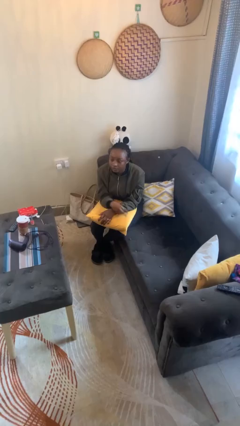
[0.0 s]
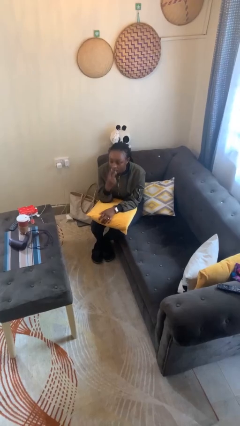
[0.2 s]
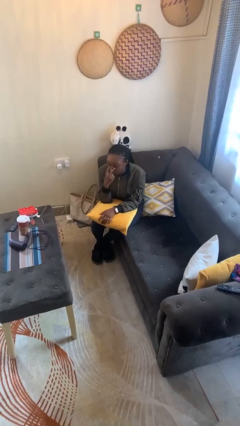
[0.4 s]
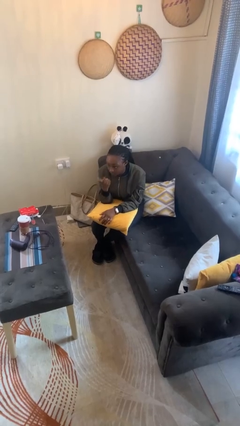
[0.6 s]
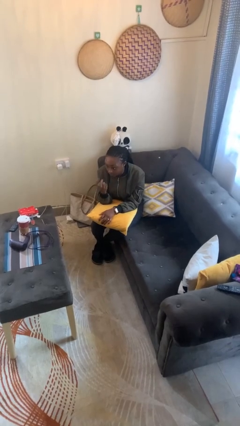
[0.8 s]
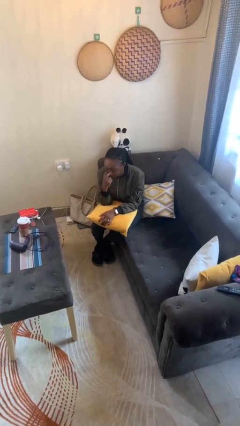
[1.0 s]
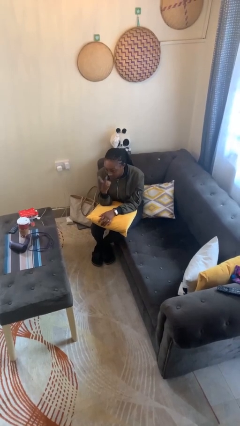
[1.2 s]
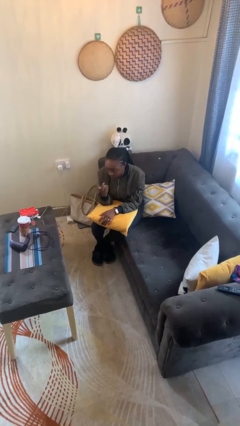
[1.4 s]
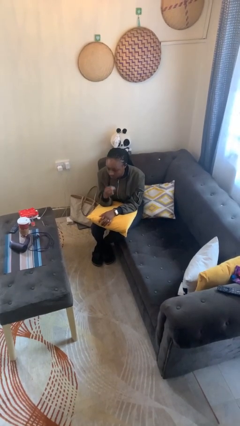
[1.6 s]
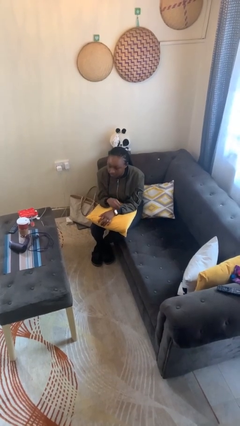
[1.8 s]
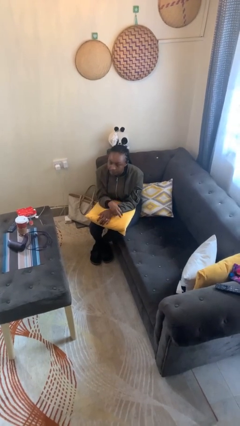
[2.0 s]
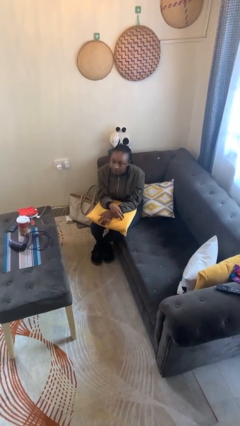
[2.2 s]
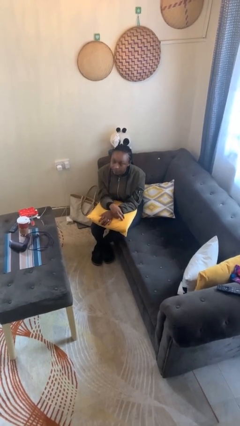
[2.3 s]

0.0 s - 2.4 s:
person gestures watch closely

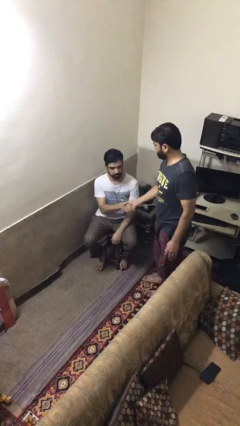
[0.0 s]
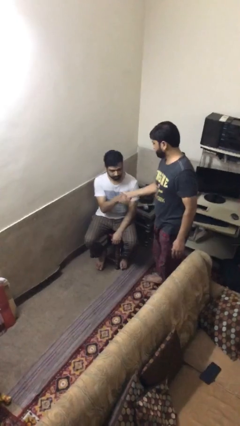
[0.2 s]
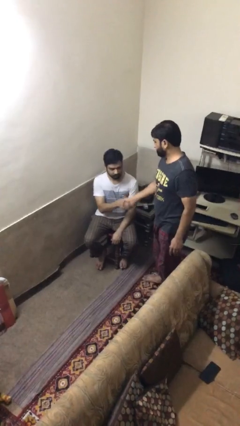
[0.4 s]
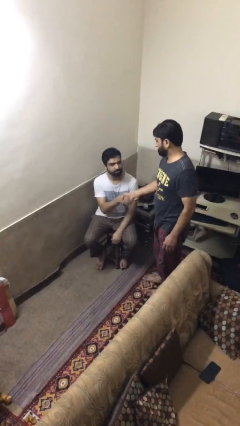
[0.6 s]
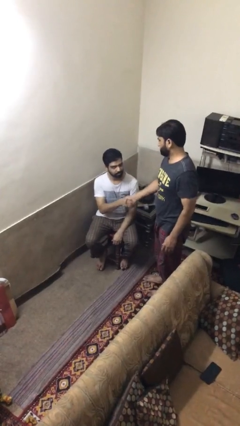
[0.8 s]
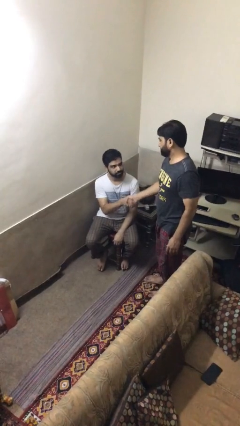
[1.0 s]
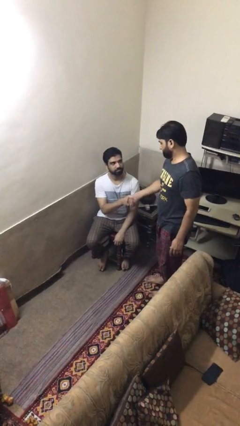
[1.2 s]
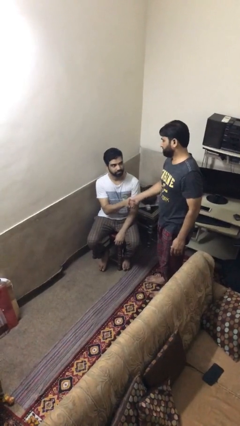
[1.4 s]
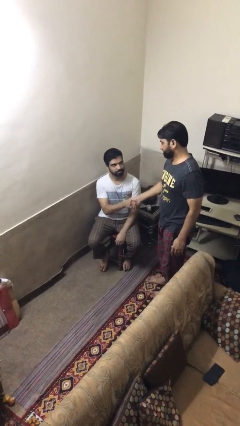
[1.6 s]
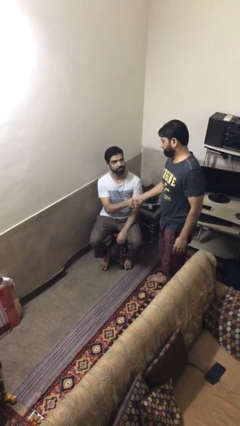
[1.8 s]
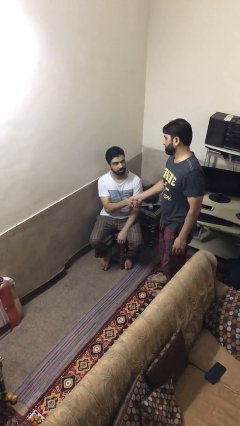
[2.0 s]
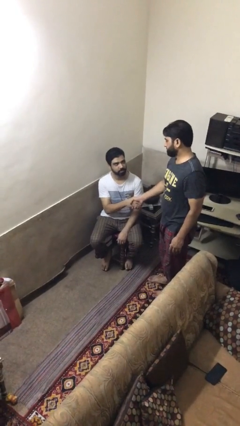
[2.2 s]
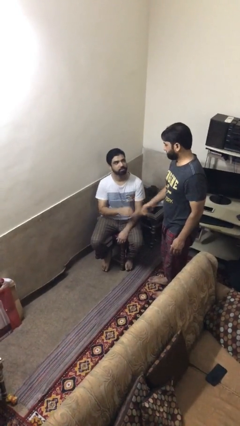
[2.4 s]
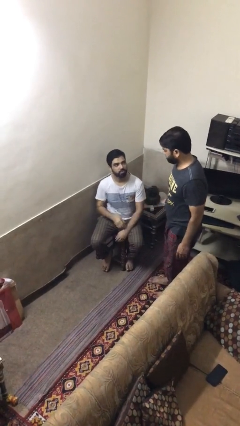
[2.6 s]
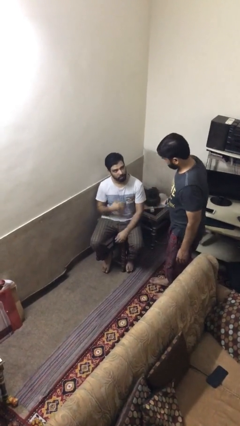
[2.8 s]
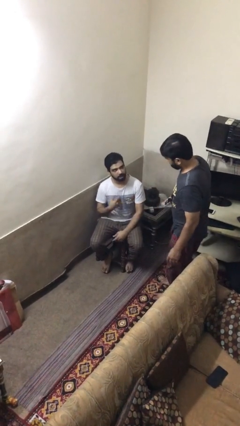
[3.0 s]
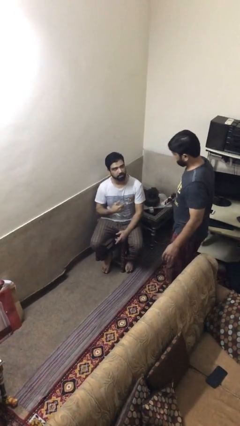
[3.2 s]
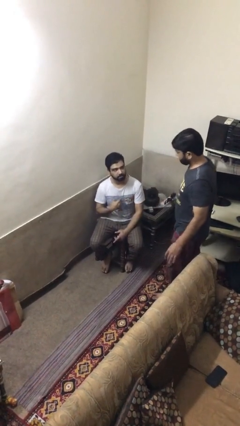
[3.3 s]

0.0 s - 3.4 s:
person shakes hand

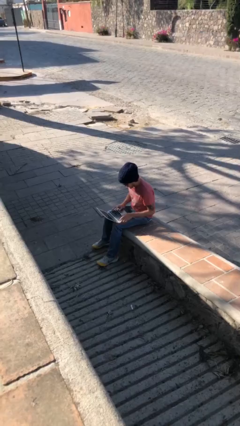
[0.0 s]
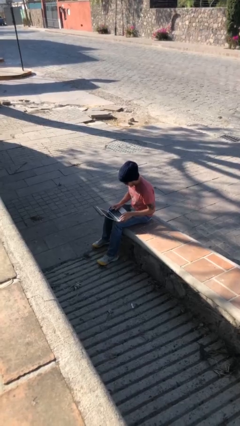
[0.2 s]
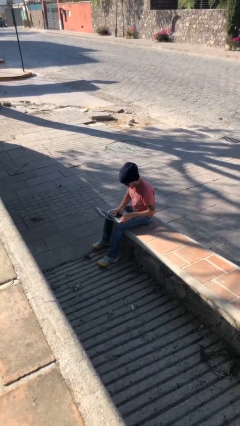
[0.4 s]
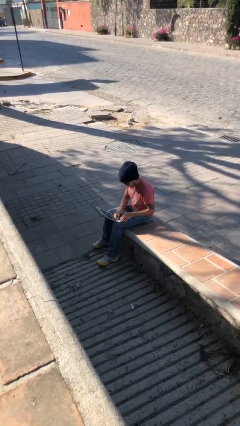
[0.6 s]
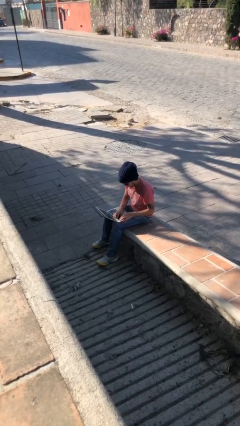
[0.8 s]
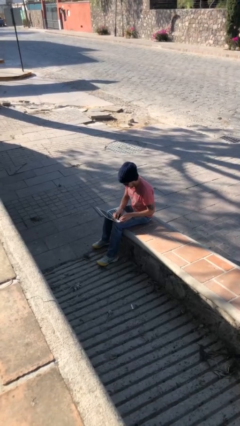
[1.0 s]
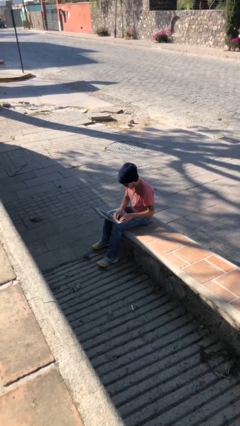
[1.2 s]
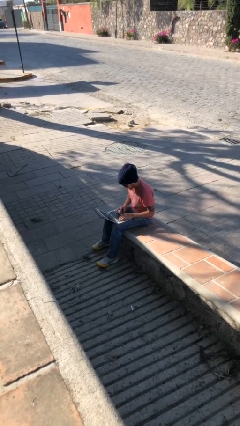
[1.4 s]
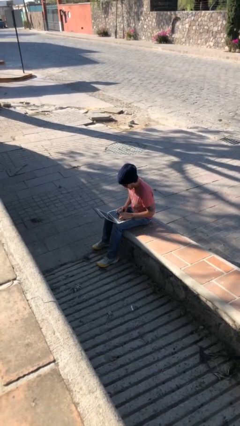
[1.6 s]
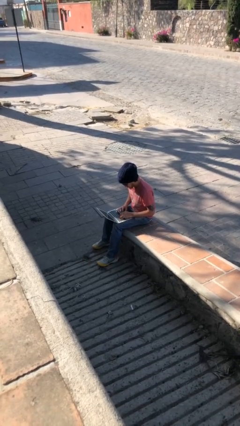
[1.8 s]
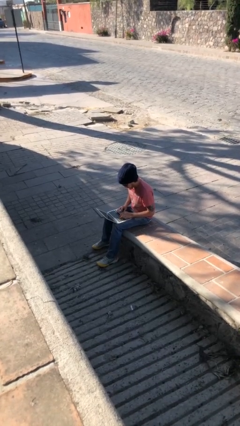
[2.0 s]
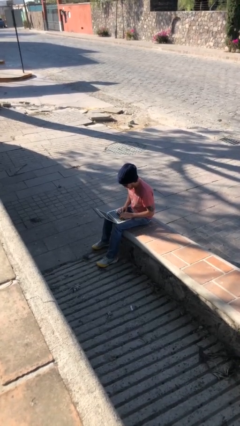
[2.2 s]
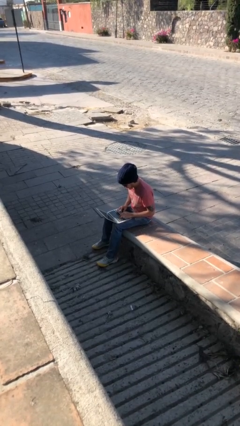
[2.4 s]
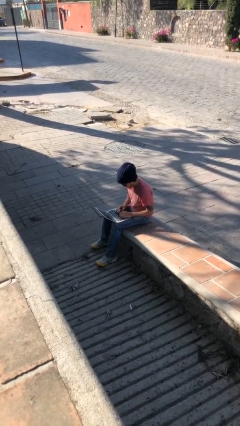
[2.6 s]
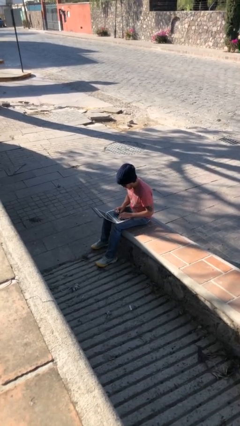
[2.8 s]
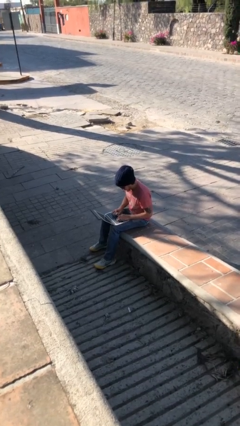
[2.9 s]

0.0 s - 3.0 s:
person interacts with laptop

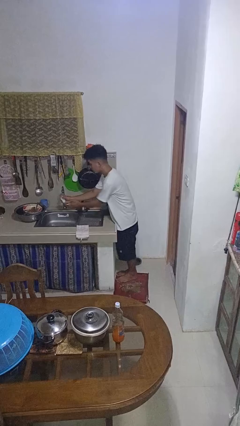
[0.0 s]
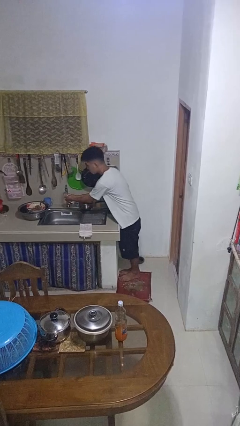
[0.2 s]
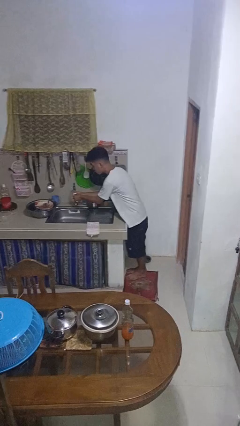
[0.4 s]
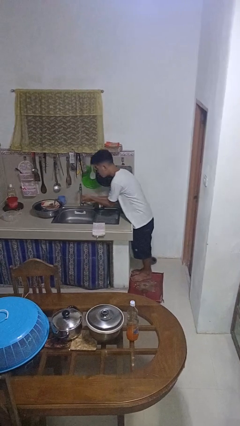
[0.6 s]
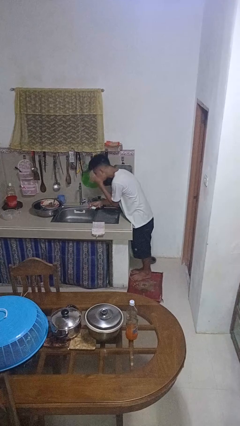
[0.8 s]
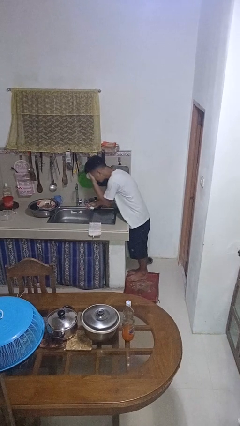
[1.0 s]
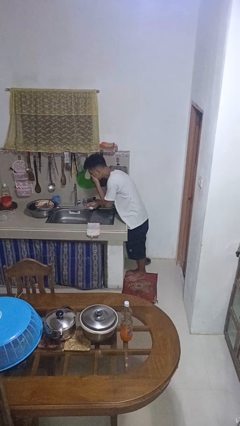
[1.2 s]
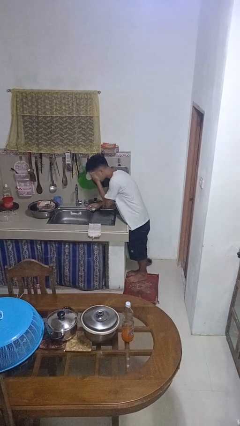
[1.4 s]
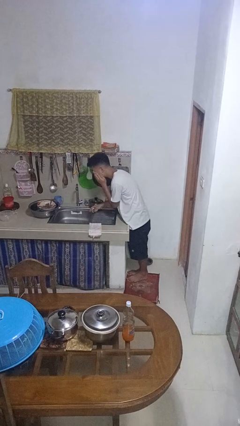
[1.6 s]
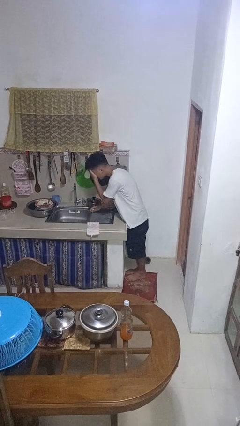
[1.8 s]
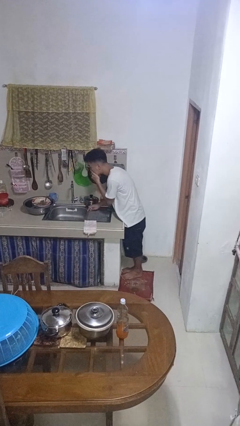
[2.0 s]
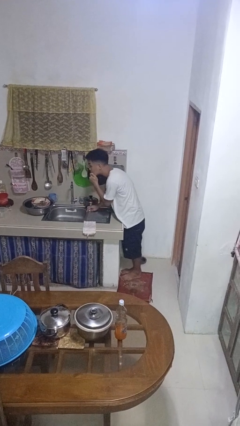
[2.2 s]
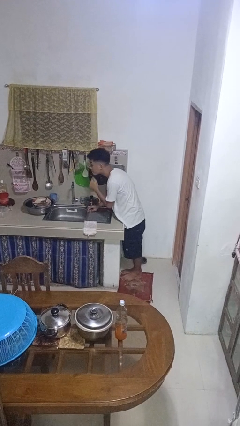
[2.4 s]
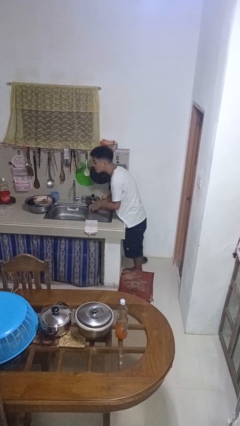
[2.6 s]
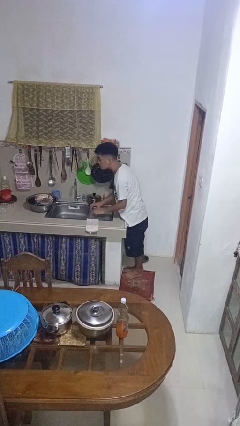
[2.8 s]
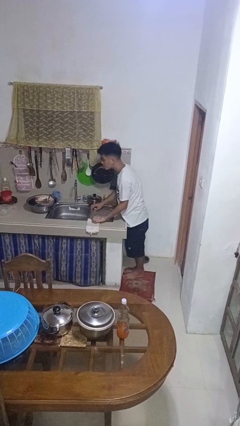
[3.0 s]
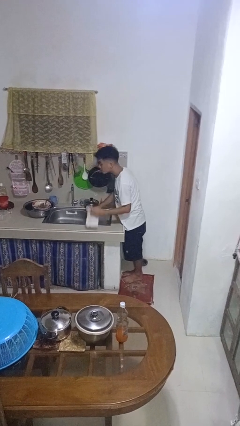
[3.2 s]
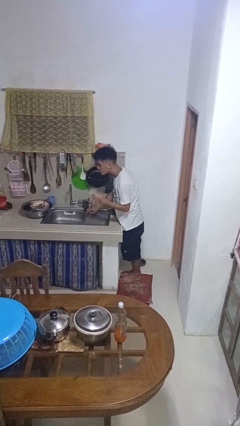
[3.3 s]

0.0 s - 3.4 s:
person washes face

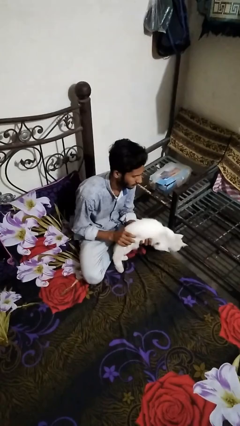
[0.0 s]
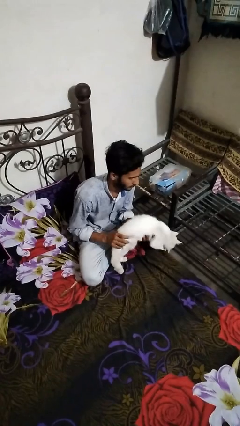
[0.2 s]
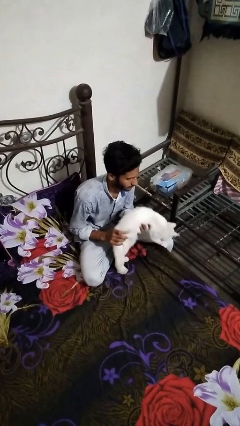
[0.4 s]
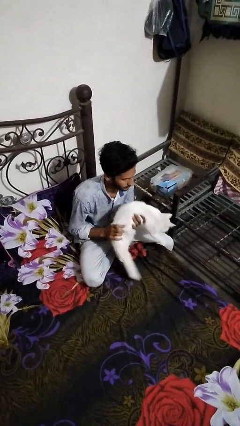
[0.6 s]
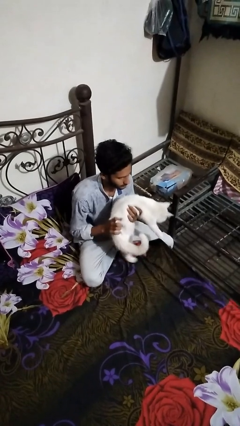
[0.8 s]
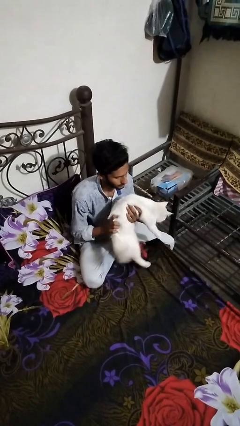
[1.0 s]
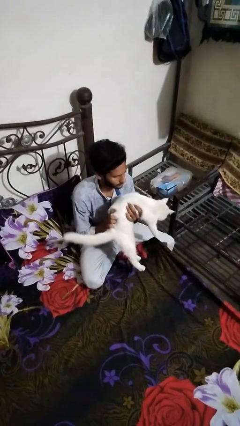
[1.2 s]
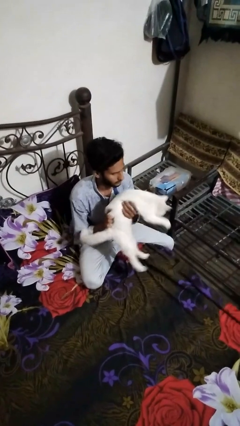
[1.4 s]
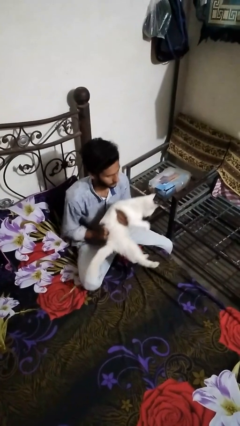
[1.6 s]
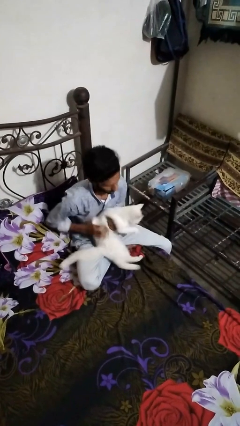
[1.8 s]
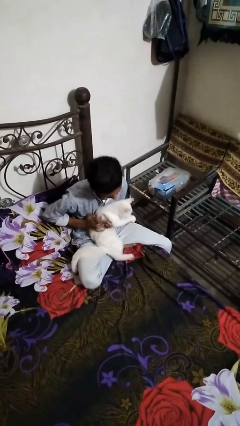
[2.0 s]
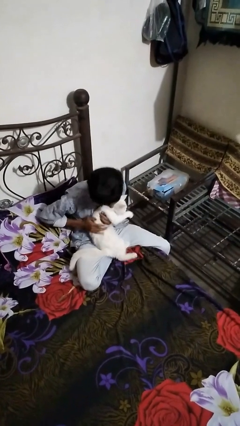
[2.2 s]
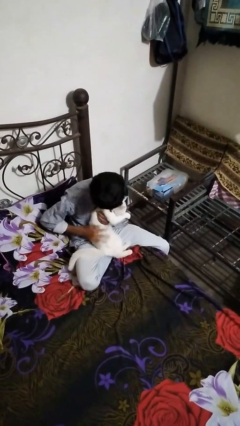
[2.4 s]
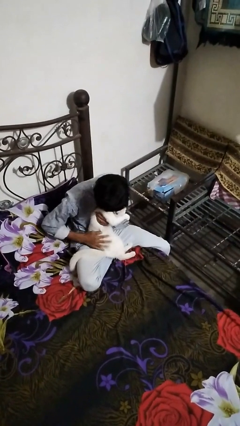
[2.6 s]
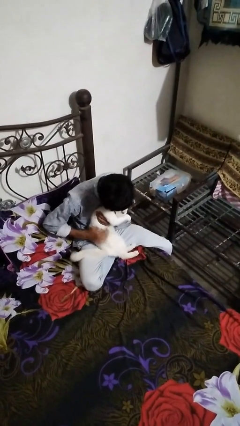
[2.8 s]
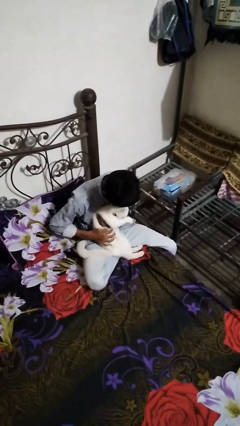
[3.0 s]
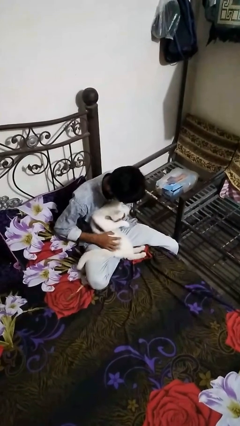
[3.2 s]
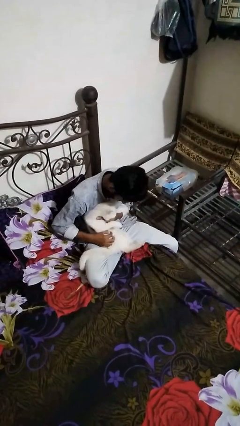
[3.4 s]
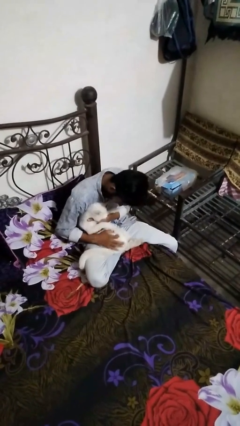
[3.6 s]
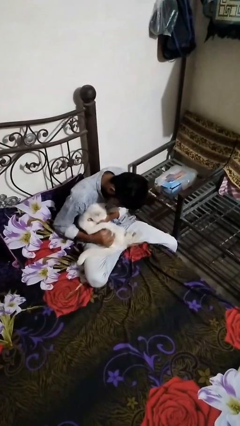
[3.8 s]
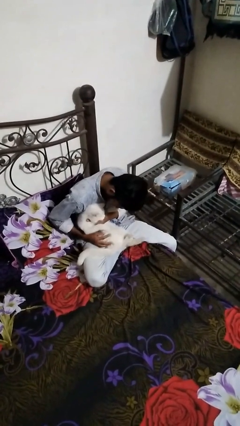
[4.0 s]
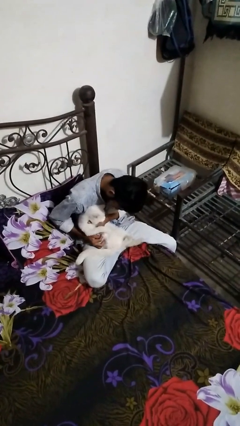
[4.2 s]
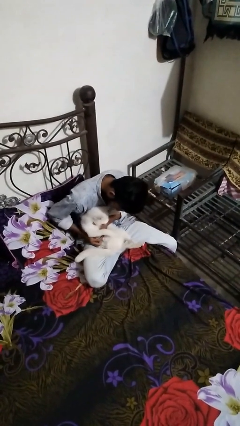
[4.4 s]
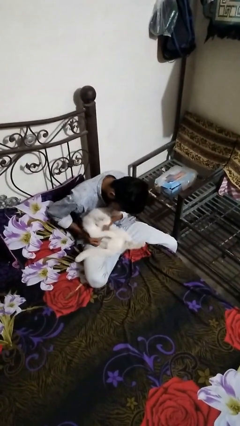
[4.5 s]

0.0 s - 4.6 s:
person pets cat

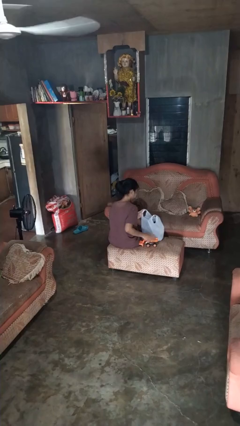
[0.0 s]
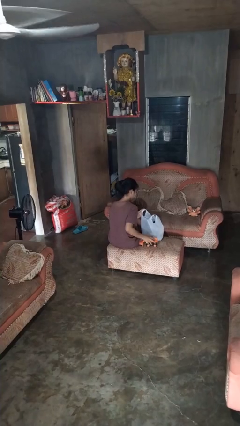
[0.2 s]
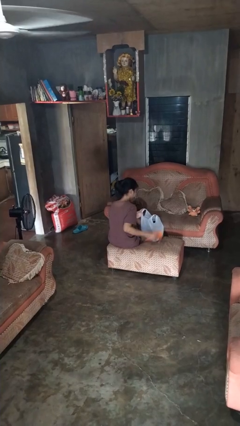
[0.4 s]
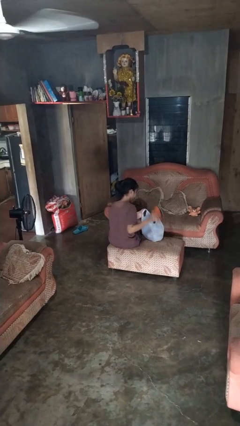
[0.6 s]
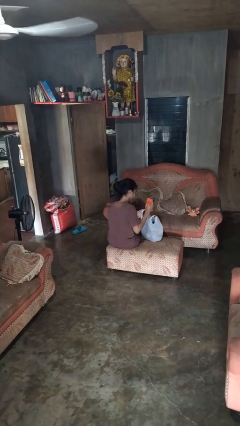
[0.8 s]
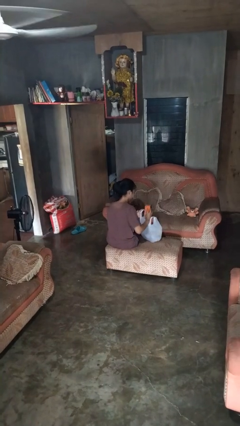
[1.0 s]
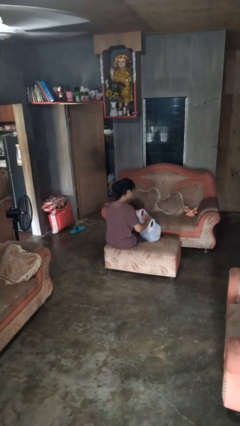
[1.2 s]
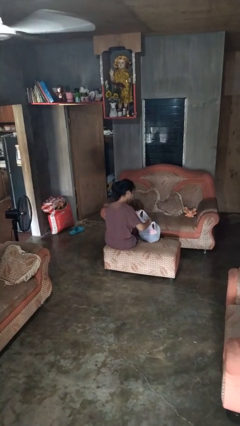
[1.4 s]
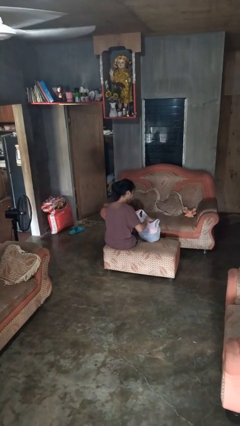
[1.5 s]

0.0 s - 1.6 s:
person puts object into bag
